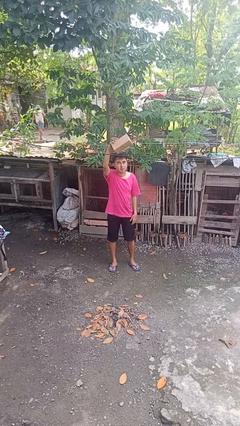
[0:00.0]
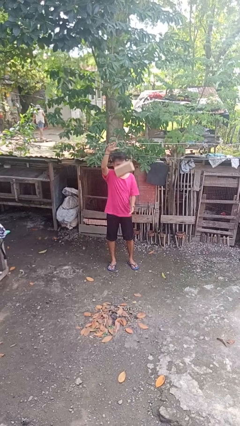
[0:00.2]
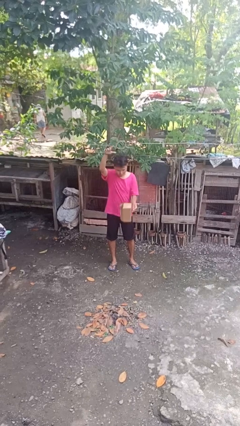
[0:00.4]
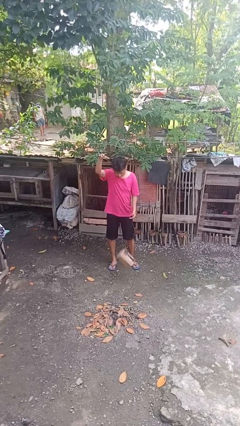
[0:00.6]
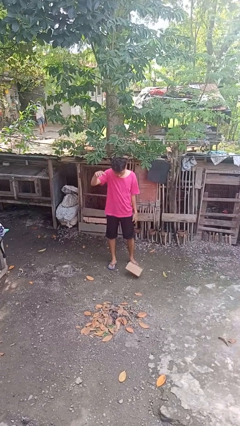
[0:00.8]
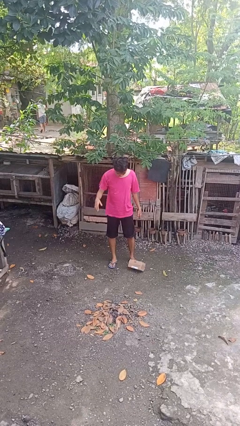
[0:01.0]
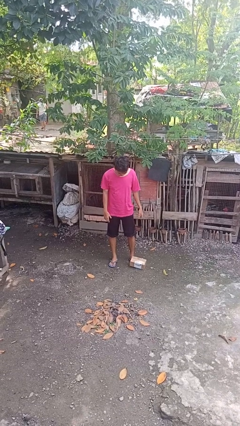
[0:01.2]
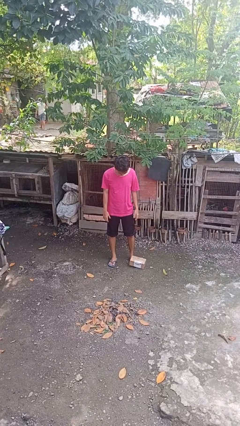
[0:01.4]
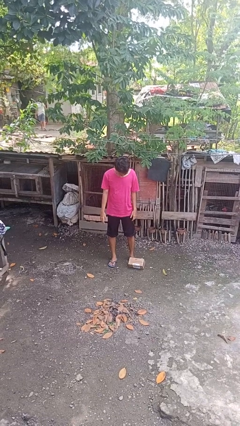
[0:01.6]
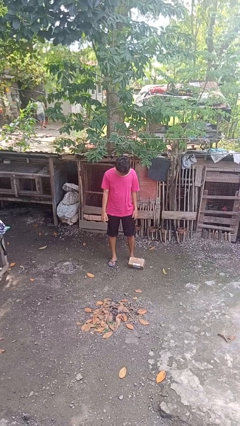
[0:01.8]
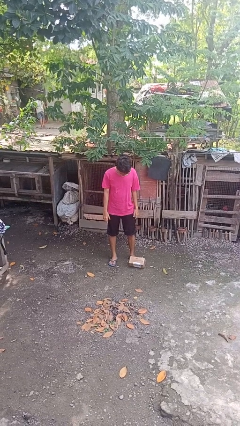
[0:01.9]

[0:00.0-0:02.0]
person drops object

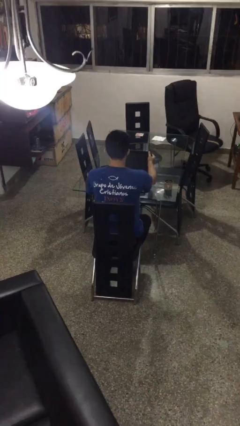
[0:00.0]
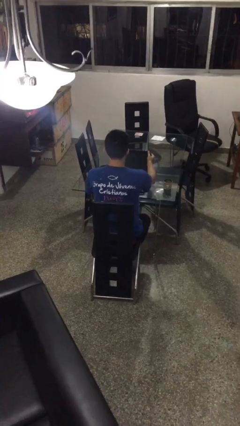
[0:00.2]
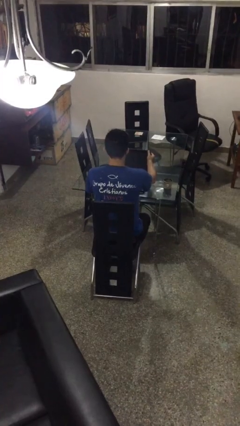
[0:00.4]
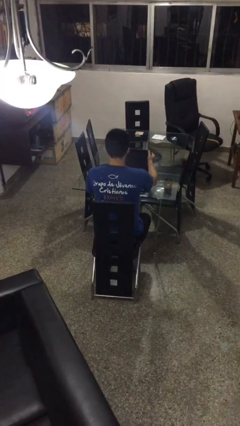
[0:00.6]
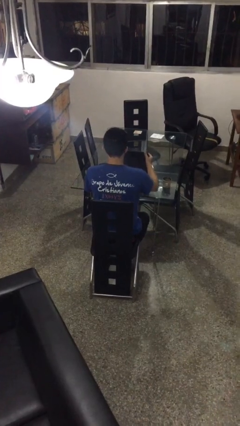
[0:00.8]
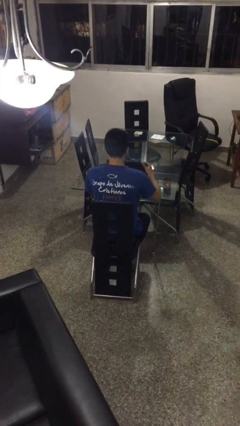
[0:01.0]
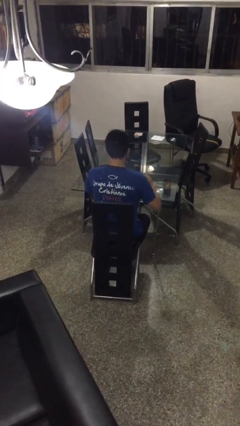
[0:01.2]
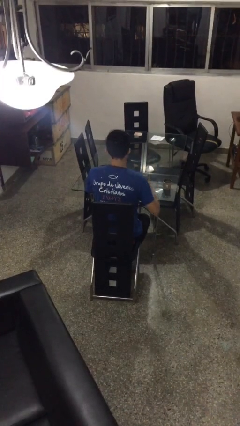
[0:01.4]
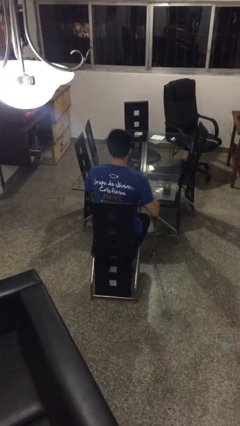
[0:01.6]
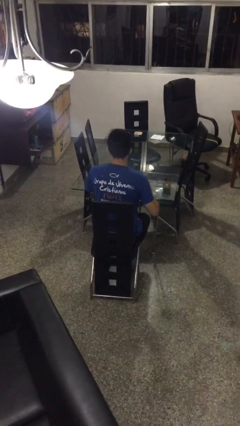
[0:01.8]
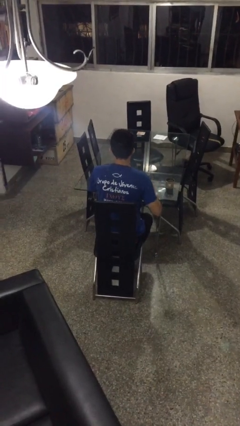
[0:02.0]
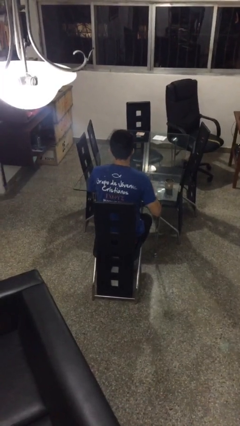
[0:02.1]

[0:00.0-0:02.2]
person closes laptop

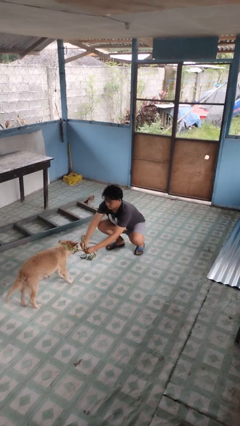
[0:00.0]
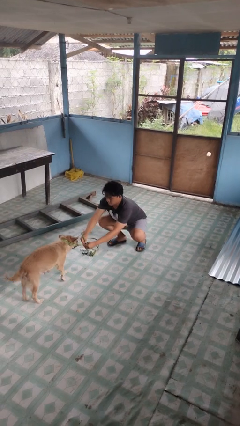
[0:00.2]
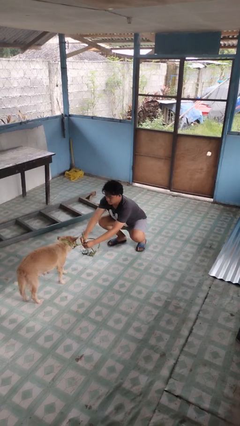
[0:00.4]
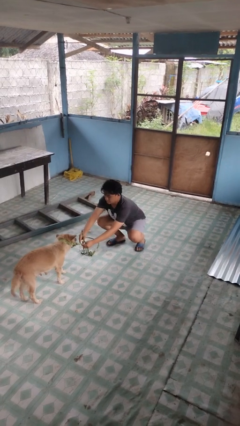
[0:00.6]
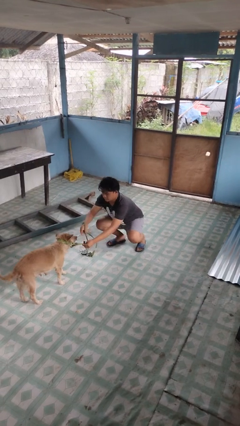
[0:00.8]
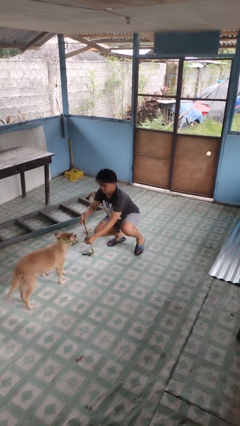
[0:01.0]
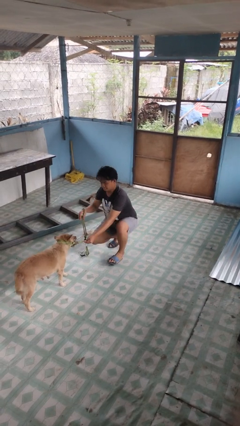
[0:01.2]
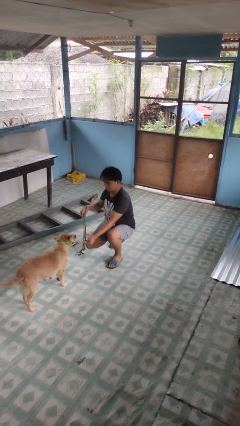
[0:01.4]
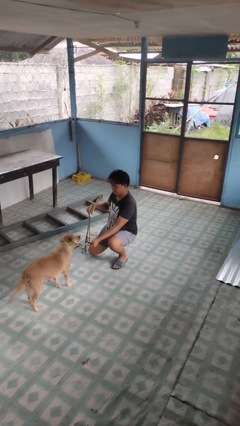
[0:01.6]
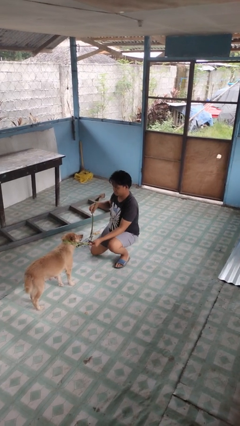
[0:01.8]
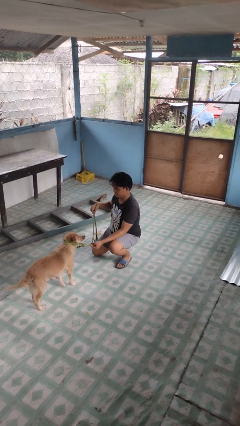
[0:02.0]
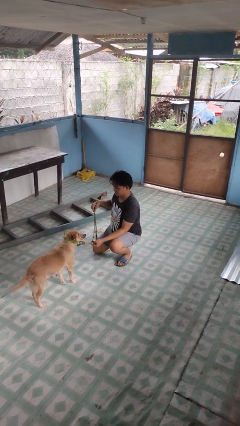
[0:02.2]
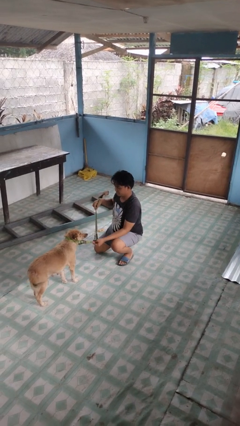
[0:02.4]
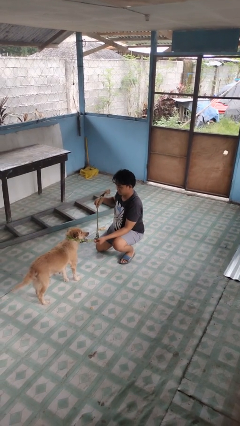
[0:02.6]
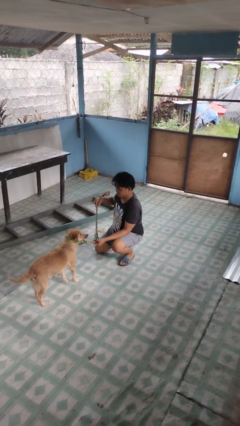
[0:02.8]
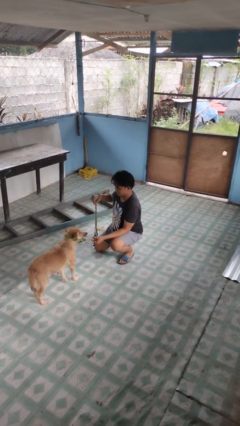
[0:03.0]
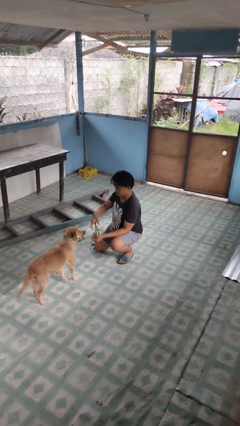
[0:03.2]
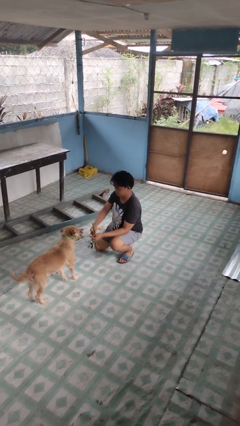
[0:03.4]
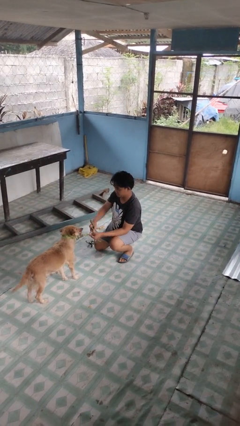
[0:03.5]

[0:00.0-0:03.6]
person attaches leash to dog

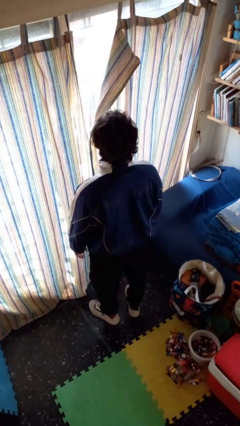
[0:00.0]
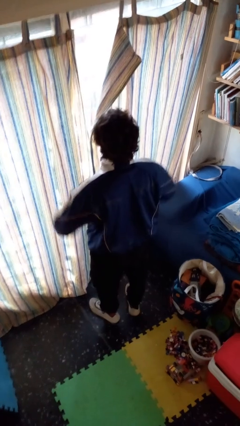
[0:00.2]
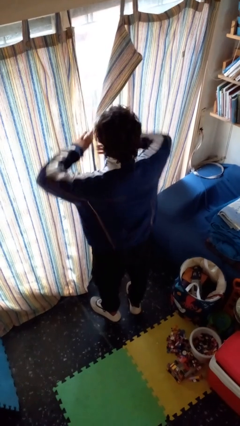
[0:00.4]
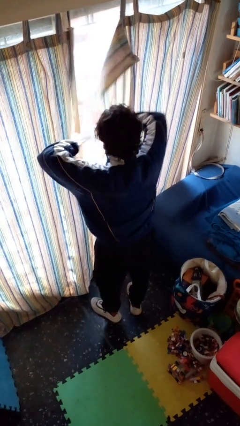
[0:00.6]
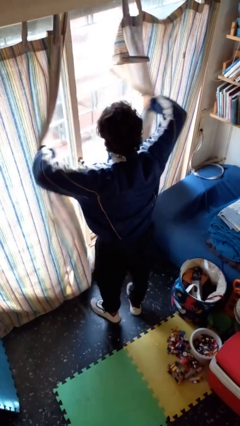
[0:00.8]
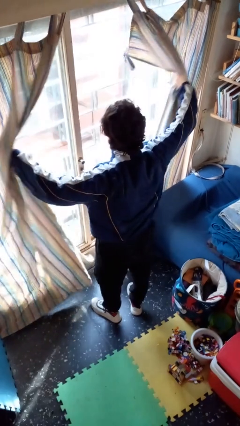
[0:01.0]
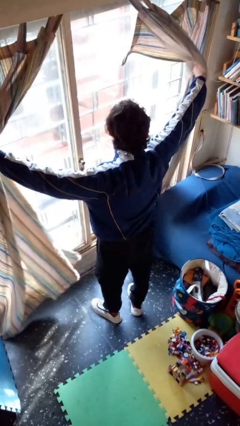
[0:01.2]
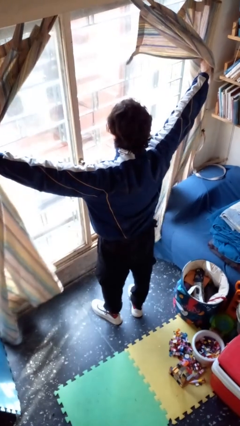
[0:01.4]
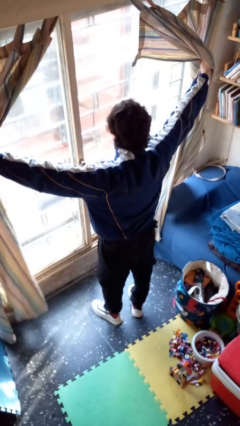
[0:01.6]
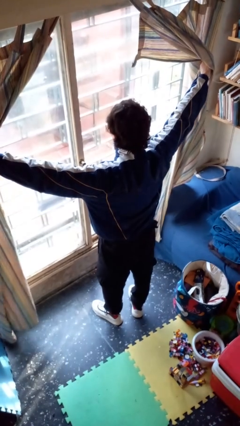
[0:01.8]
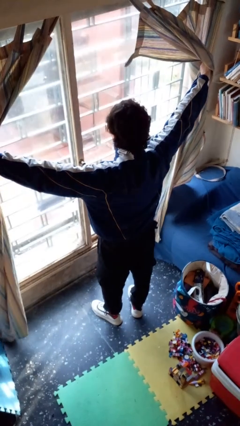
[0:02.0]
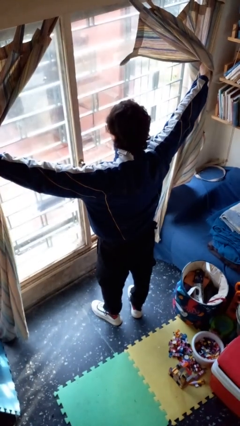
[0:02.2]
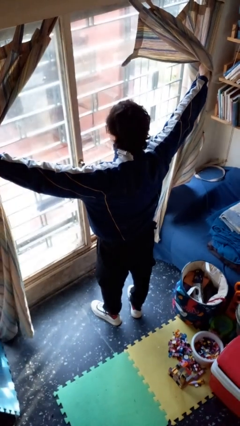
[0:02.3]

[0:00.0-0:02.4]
person opens curtains

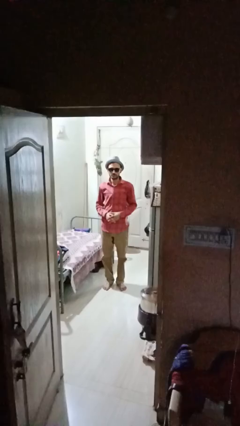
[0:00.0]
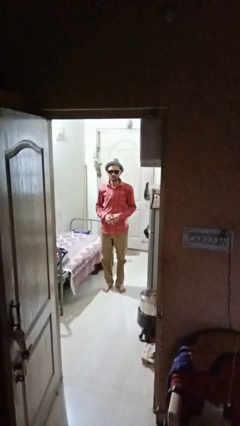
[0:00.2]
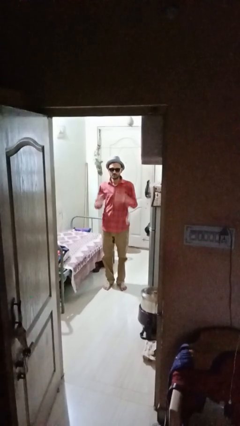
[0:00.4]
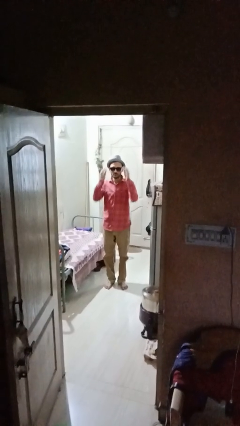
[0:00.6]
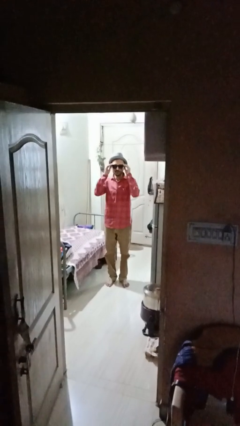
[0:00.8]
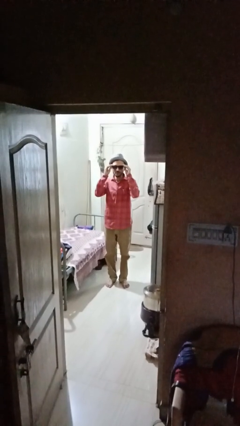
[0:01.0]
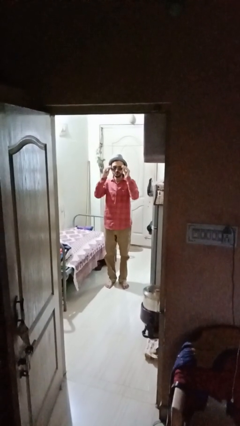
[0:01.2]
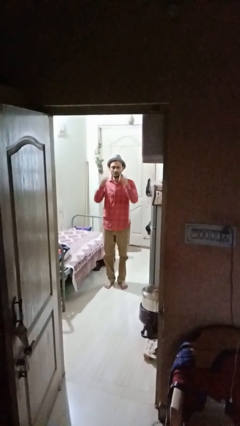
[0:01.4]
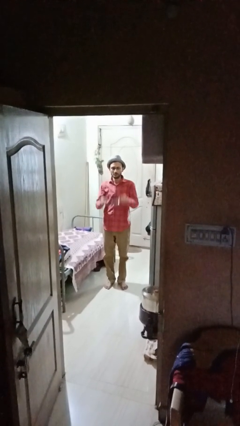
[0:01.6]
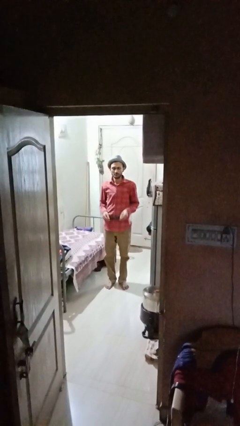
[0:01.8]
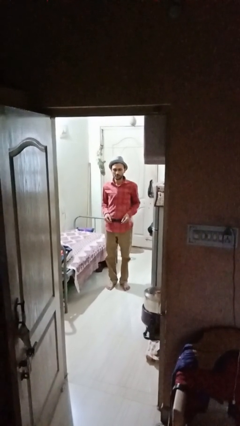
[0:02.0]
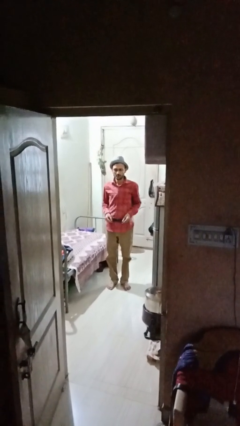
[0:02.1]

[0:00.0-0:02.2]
person takes off sunglasses

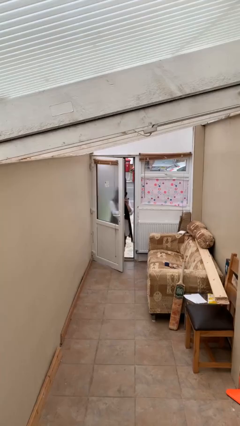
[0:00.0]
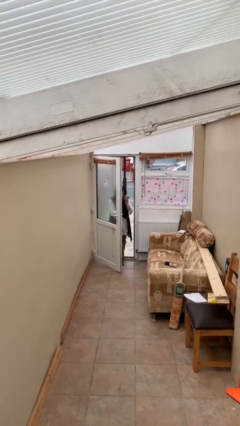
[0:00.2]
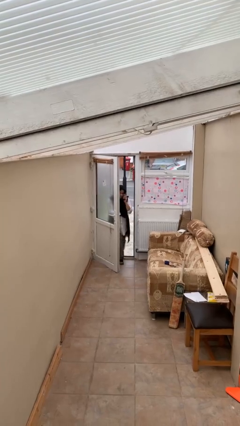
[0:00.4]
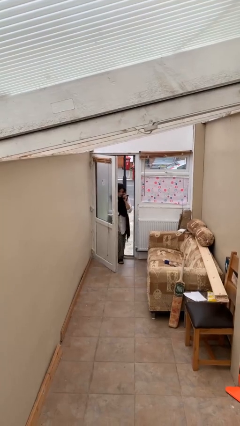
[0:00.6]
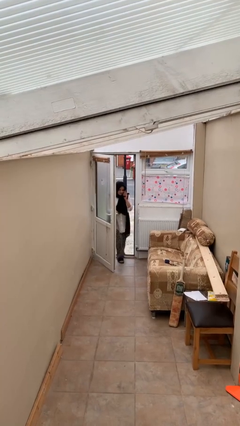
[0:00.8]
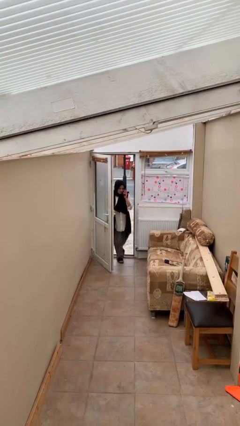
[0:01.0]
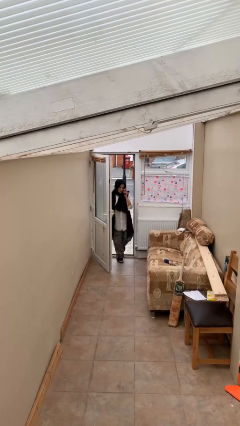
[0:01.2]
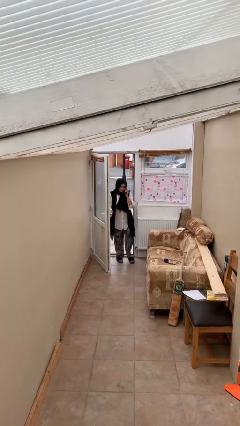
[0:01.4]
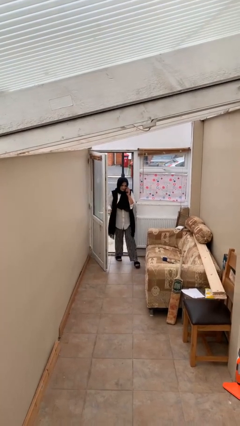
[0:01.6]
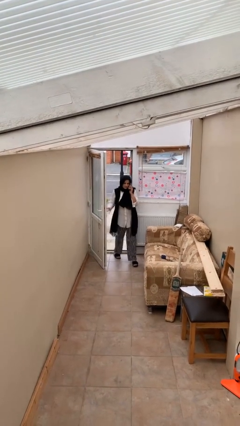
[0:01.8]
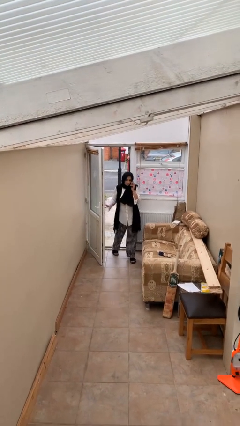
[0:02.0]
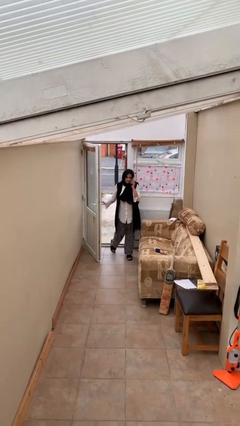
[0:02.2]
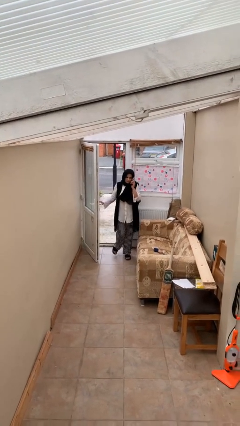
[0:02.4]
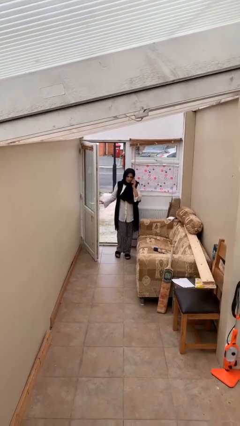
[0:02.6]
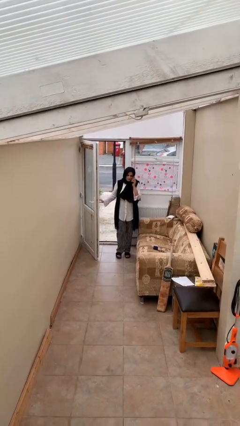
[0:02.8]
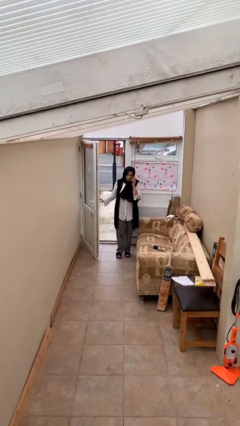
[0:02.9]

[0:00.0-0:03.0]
person enters scene through structure

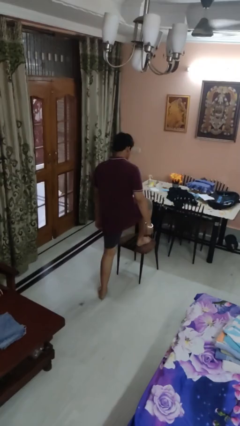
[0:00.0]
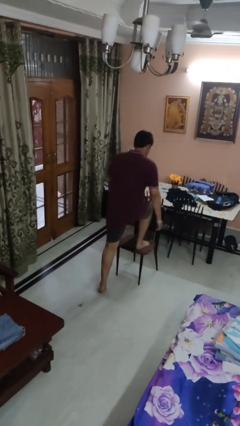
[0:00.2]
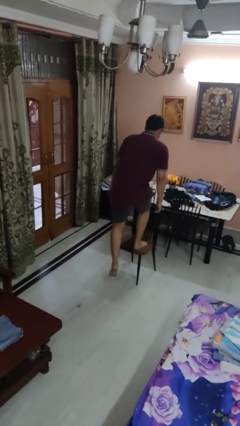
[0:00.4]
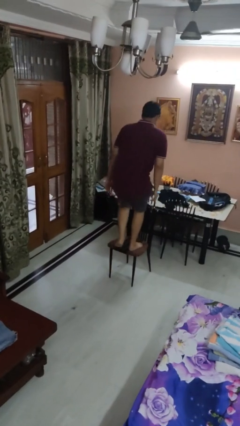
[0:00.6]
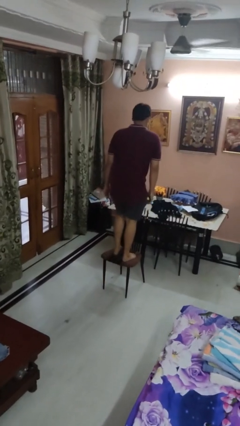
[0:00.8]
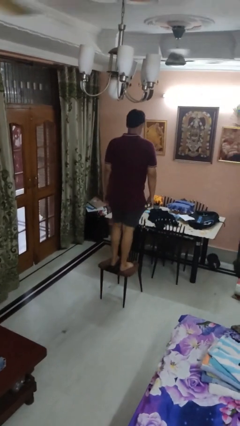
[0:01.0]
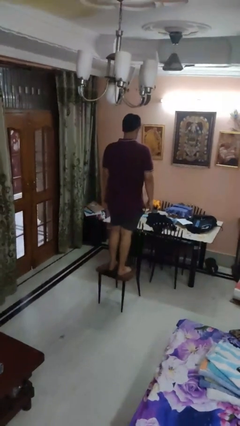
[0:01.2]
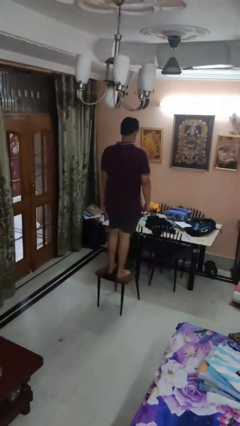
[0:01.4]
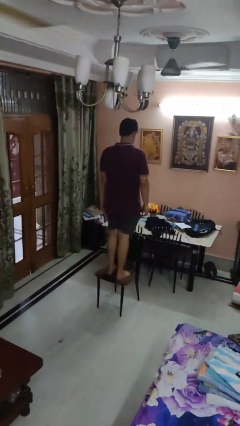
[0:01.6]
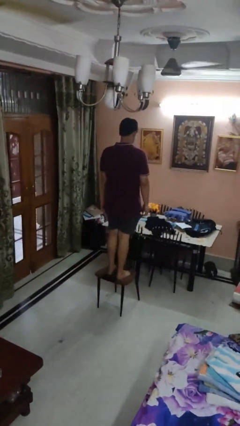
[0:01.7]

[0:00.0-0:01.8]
person climbs on chair
